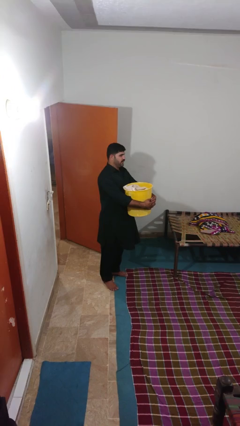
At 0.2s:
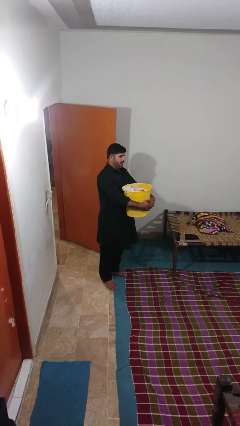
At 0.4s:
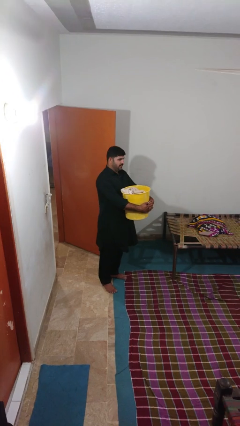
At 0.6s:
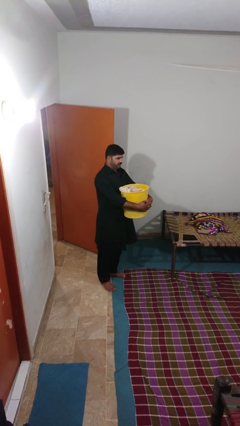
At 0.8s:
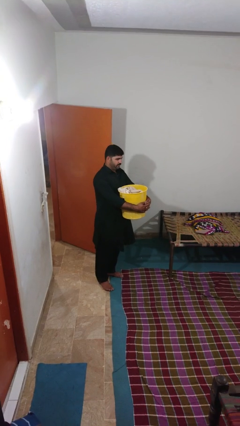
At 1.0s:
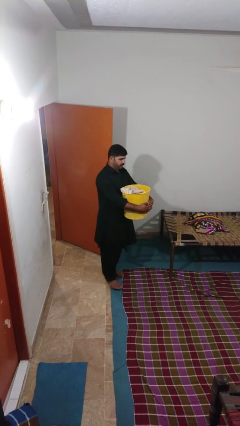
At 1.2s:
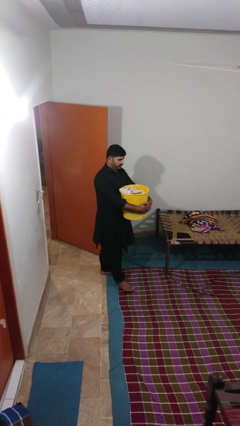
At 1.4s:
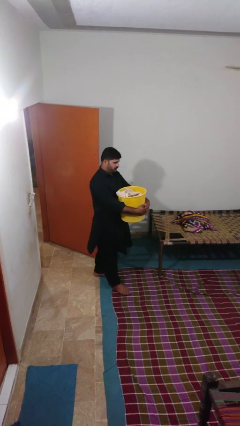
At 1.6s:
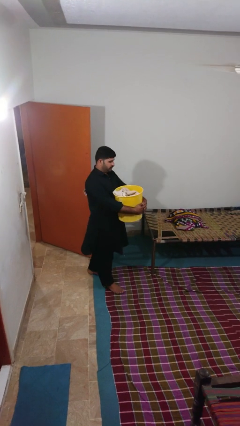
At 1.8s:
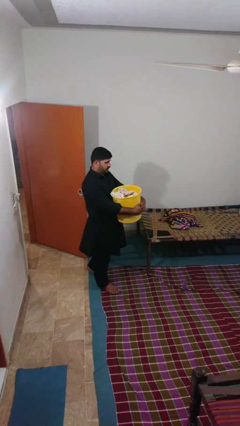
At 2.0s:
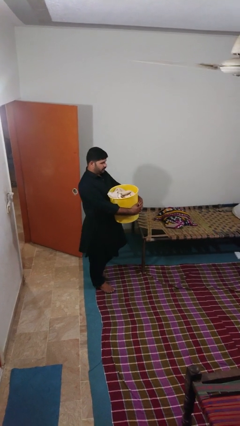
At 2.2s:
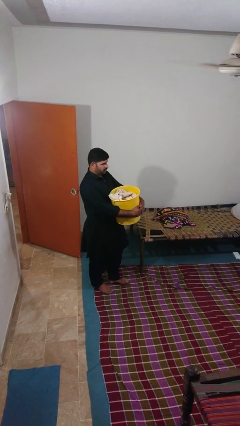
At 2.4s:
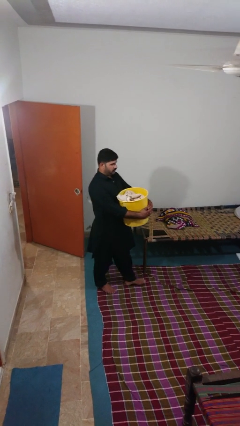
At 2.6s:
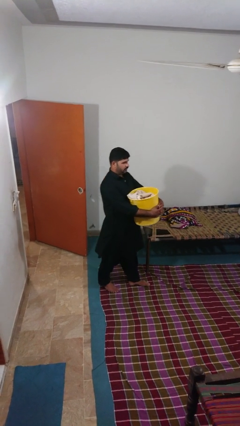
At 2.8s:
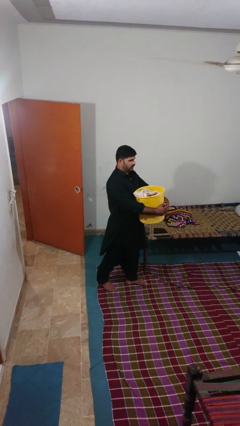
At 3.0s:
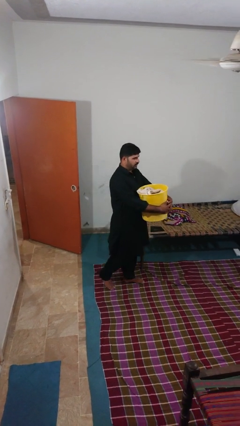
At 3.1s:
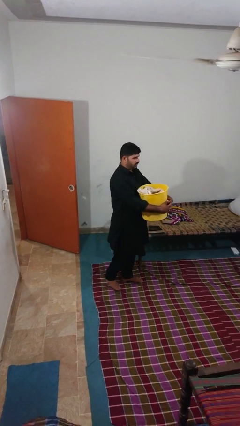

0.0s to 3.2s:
person carries laundry basket

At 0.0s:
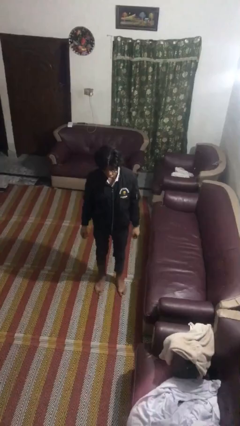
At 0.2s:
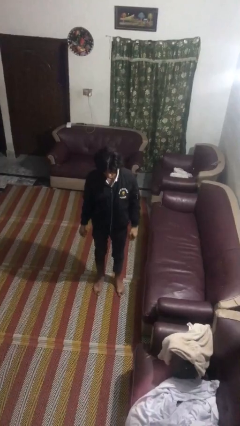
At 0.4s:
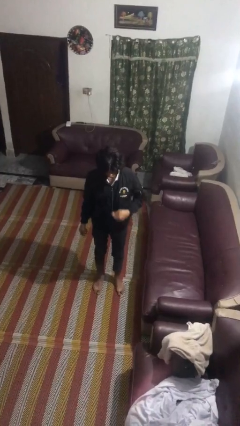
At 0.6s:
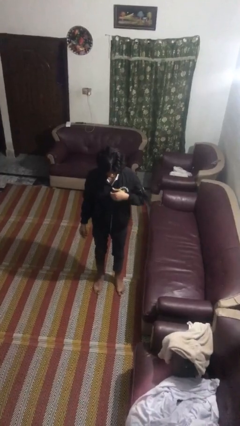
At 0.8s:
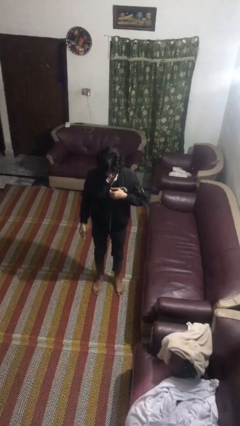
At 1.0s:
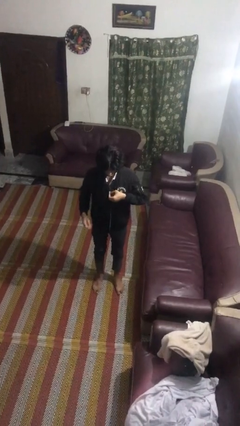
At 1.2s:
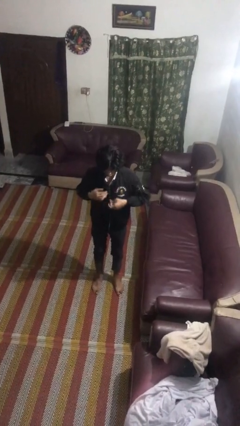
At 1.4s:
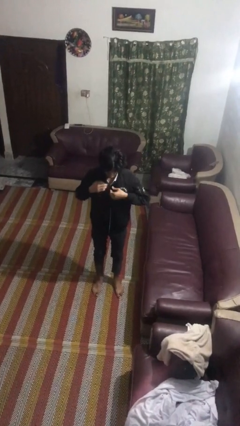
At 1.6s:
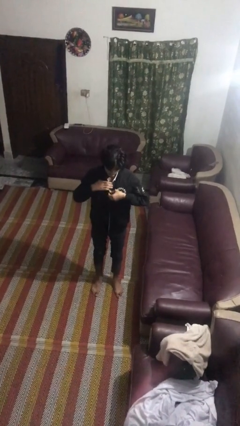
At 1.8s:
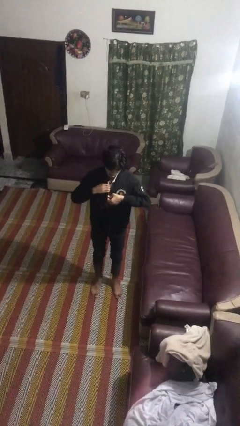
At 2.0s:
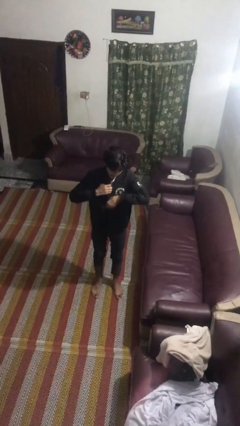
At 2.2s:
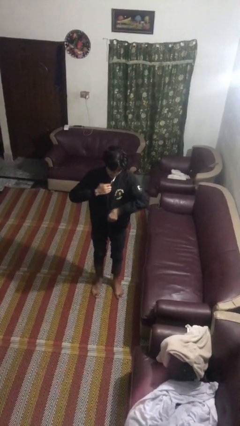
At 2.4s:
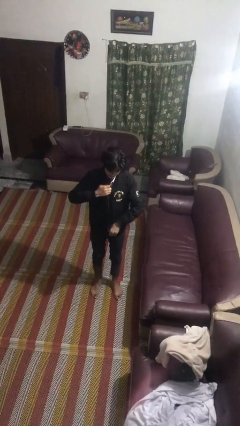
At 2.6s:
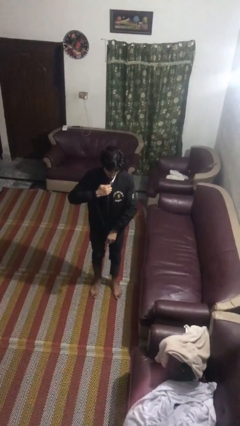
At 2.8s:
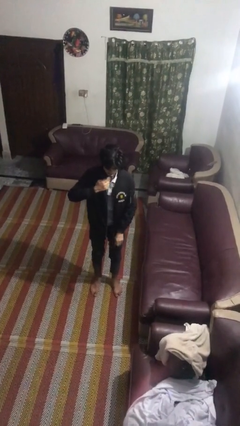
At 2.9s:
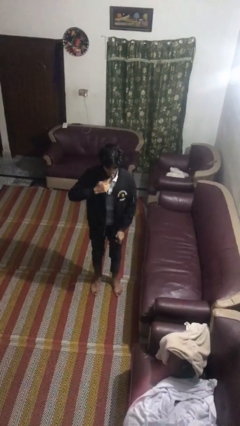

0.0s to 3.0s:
person unzips jacket

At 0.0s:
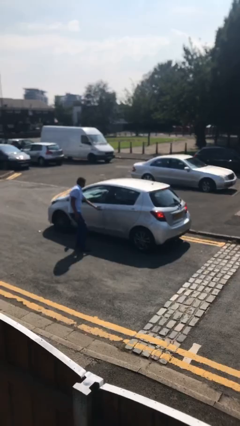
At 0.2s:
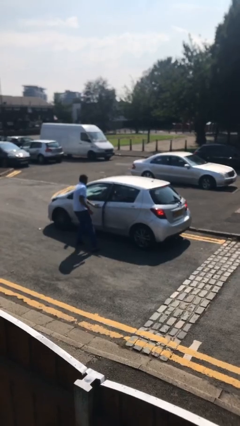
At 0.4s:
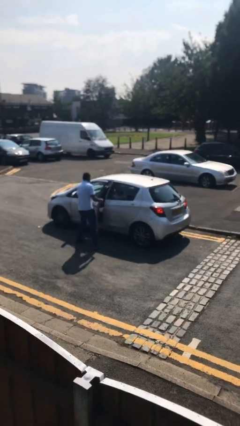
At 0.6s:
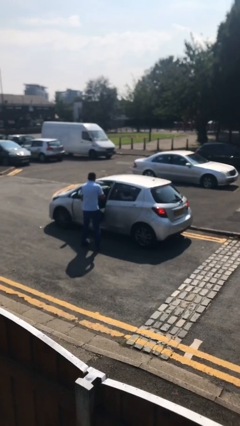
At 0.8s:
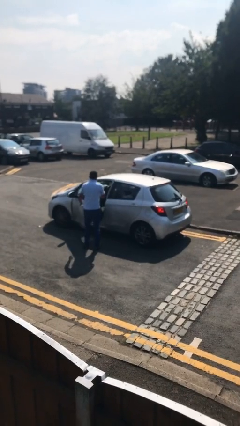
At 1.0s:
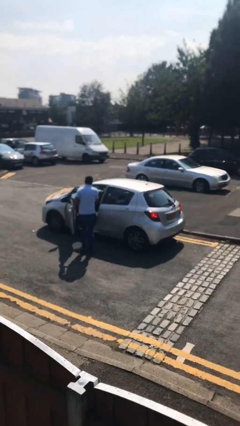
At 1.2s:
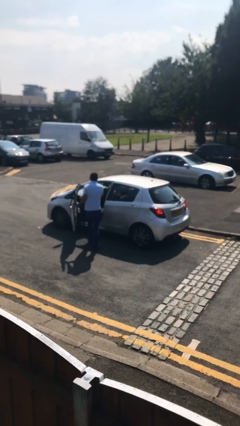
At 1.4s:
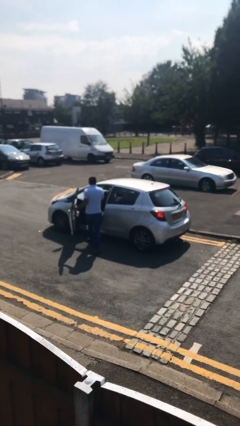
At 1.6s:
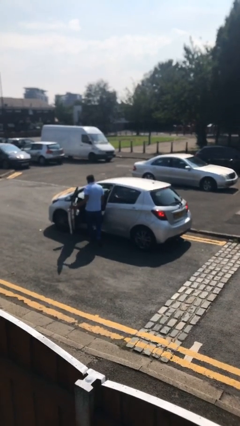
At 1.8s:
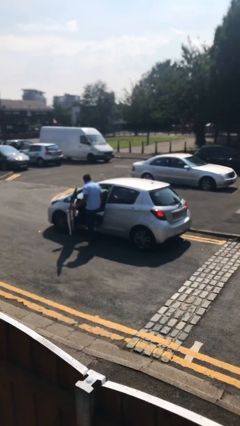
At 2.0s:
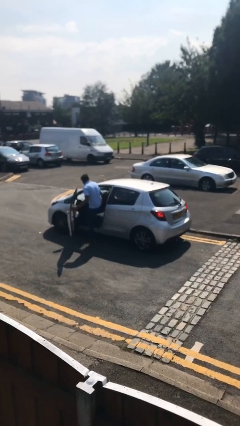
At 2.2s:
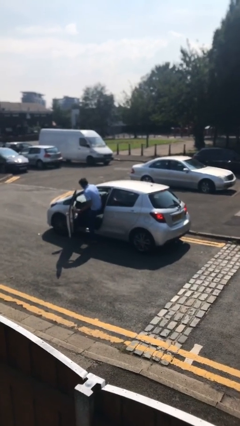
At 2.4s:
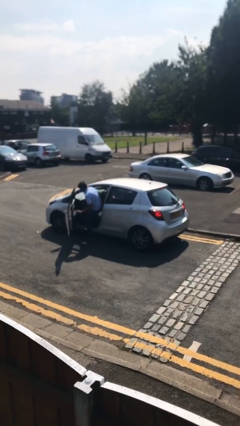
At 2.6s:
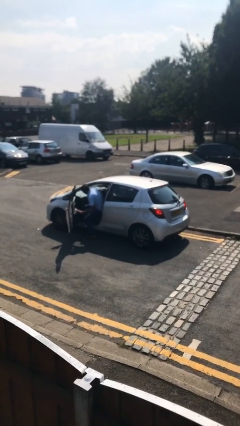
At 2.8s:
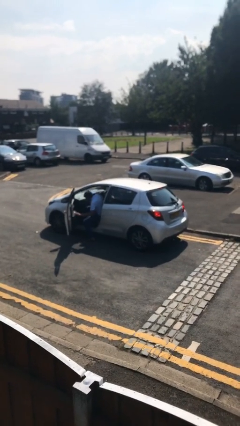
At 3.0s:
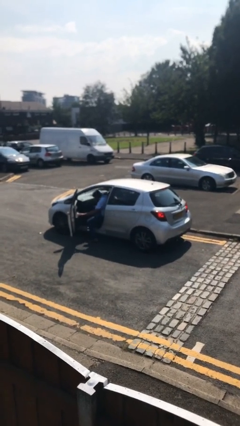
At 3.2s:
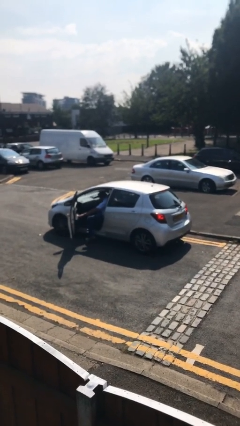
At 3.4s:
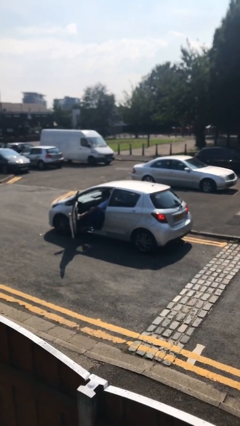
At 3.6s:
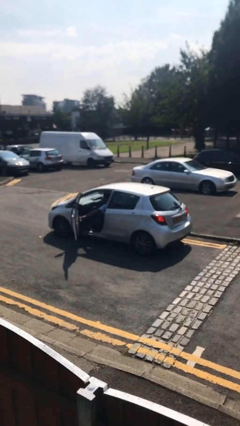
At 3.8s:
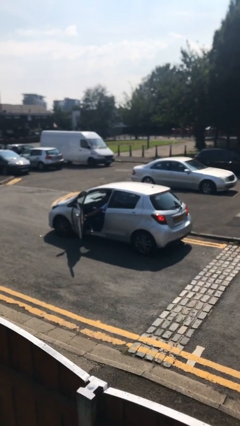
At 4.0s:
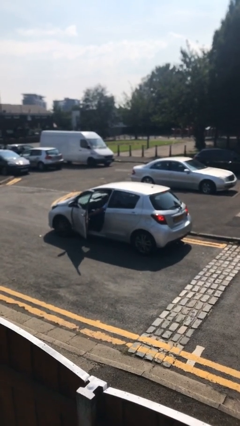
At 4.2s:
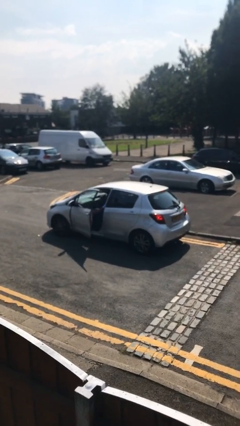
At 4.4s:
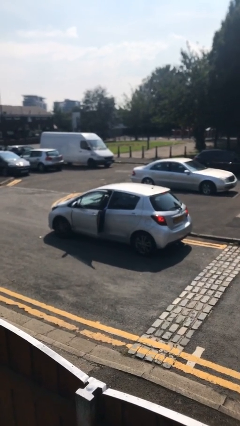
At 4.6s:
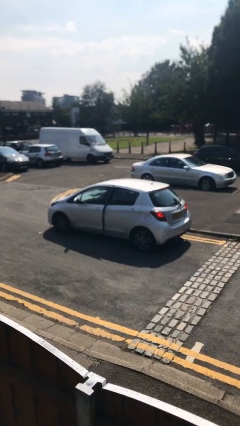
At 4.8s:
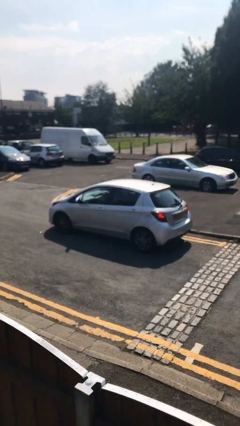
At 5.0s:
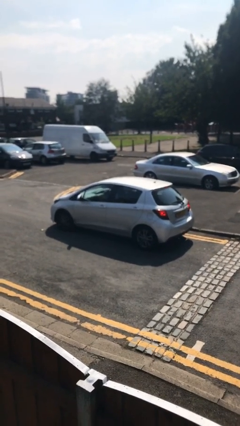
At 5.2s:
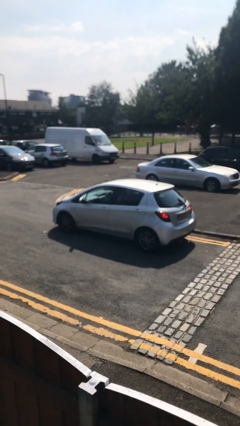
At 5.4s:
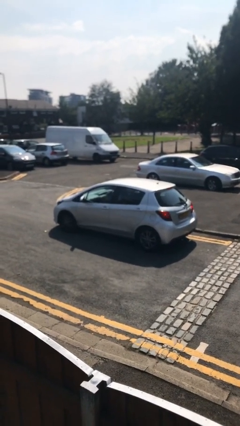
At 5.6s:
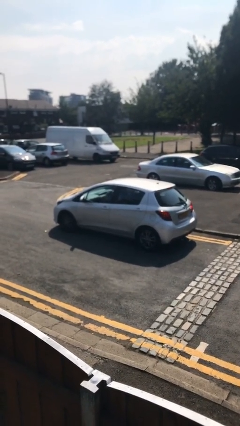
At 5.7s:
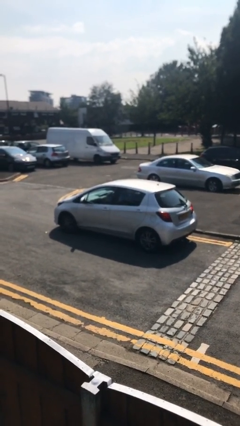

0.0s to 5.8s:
car picks up person

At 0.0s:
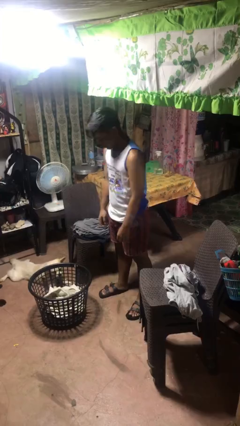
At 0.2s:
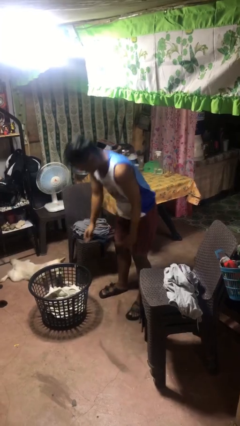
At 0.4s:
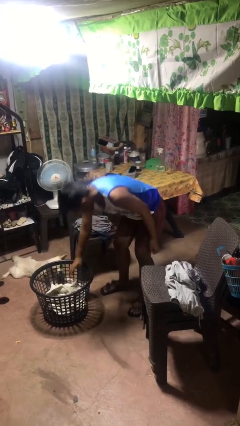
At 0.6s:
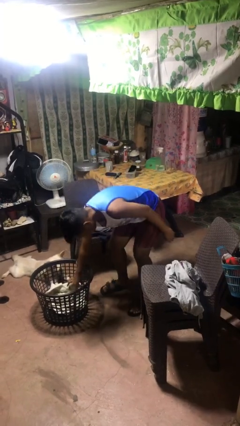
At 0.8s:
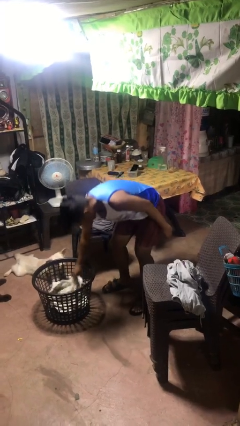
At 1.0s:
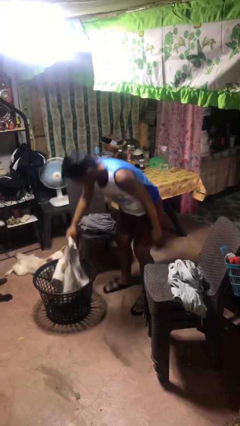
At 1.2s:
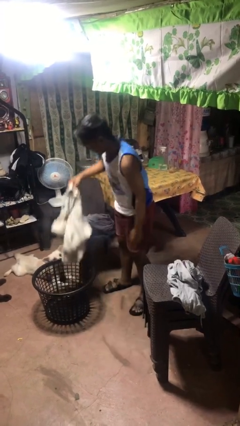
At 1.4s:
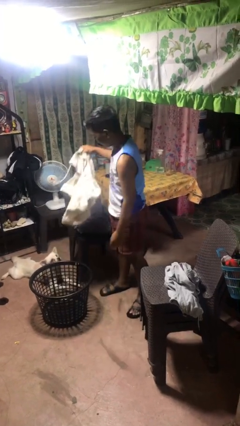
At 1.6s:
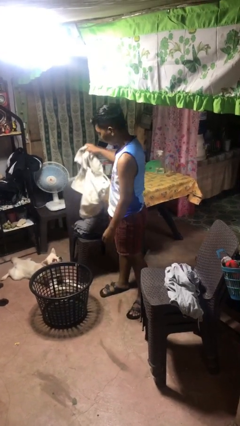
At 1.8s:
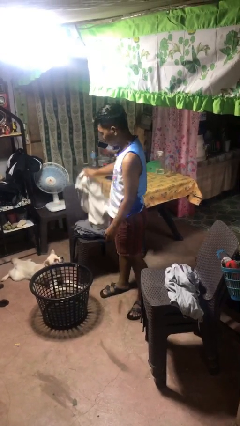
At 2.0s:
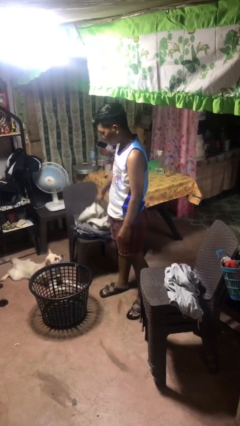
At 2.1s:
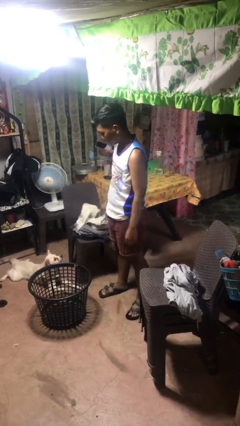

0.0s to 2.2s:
person takes object from basket

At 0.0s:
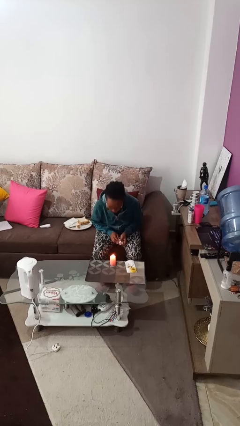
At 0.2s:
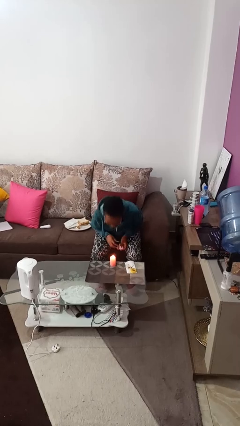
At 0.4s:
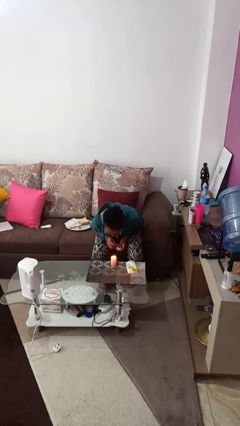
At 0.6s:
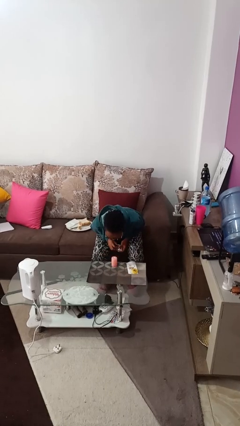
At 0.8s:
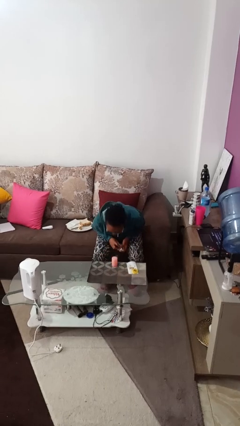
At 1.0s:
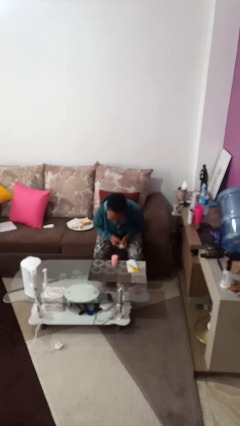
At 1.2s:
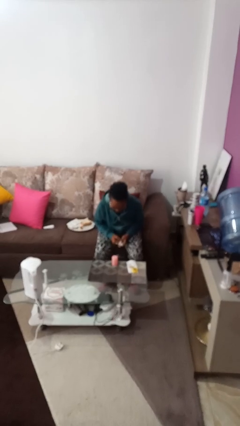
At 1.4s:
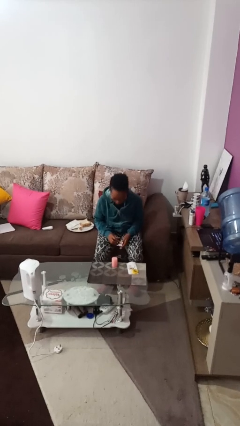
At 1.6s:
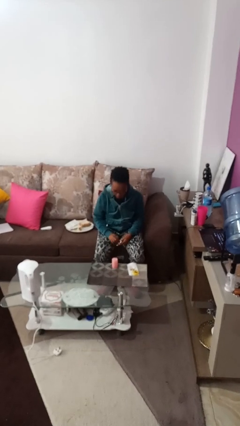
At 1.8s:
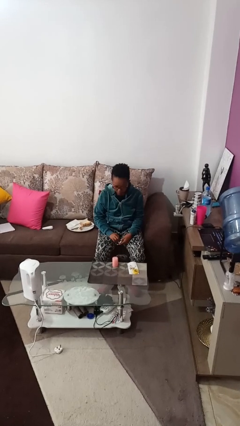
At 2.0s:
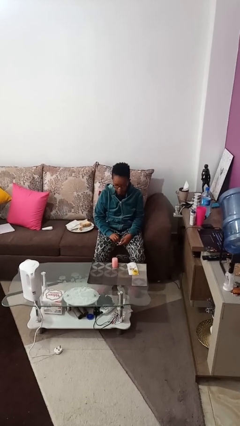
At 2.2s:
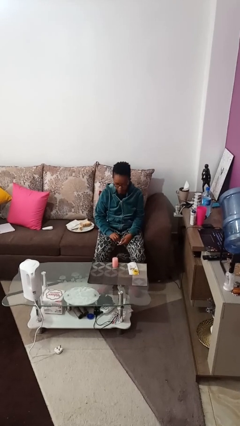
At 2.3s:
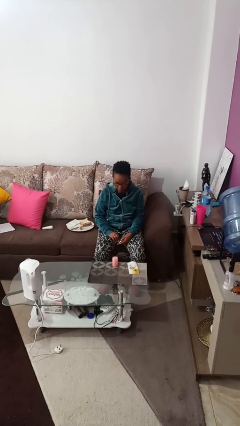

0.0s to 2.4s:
person extinguishes candle

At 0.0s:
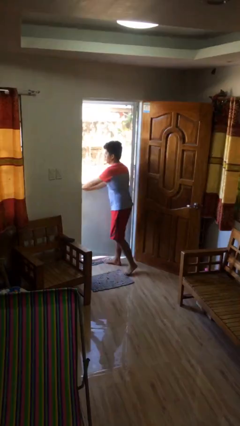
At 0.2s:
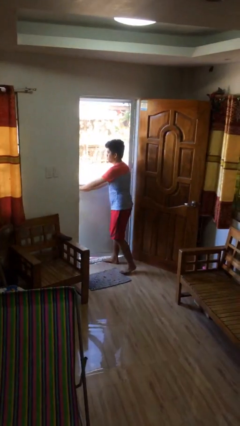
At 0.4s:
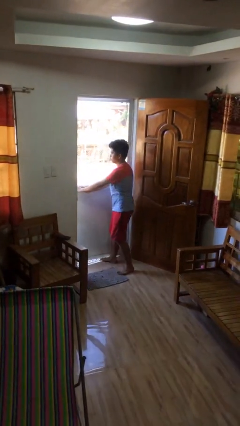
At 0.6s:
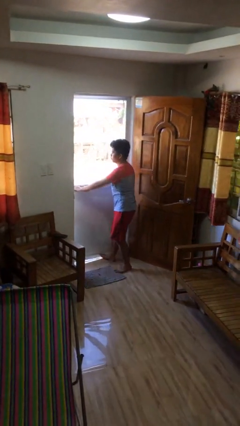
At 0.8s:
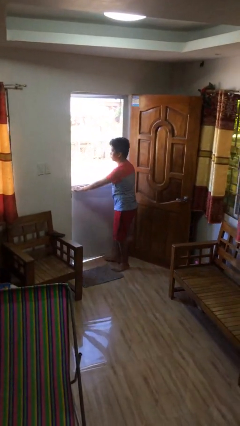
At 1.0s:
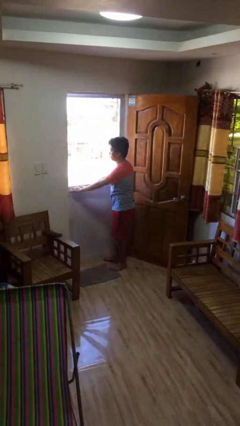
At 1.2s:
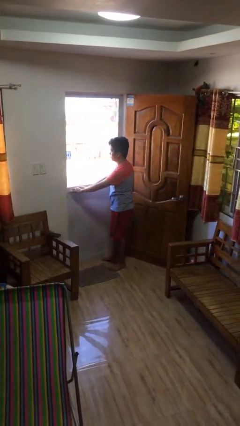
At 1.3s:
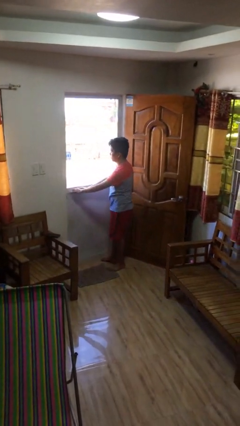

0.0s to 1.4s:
person closes facility door
